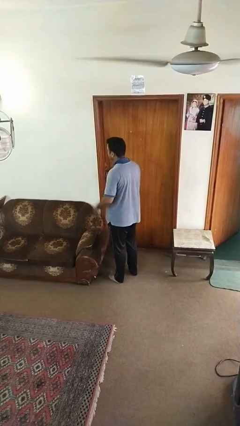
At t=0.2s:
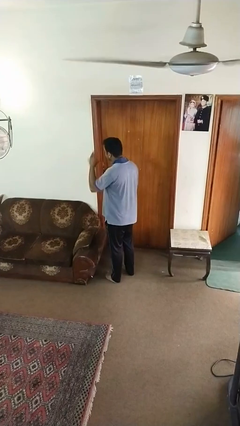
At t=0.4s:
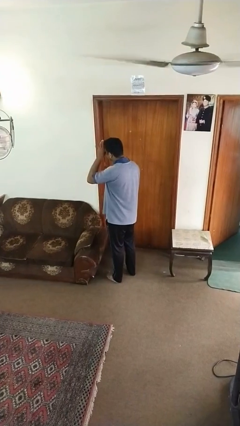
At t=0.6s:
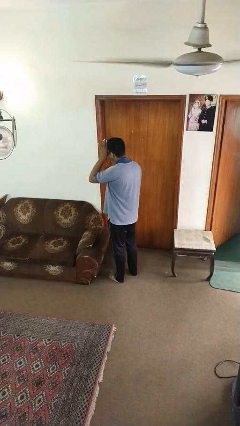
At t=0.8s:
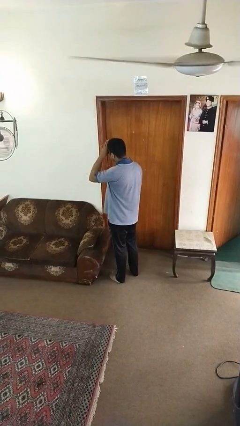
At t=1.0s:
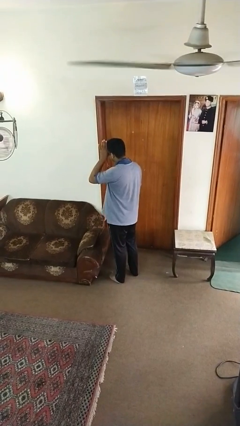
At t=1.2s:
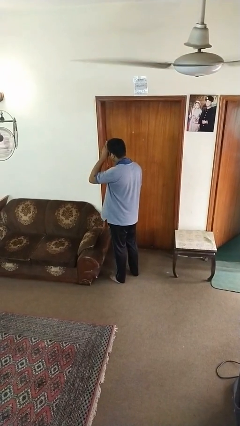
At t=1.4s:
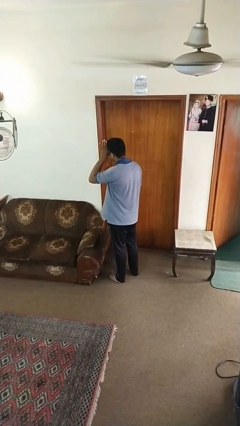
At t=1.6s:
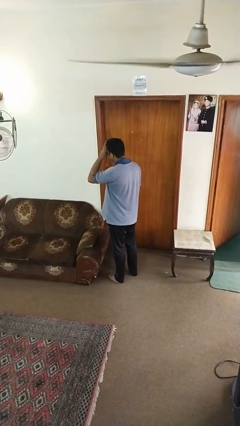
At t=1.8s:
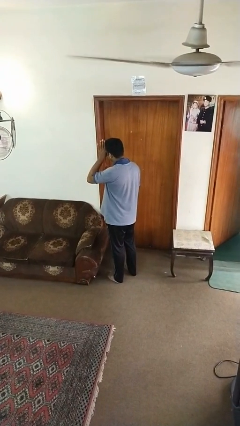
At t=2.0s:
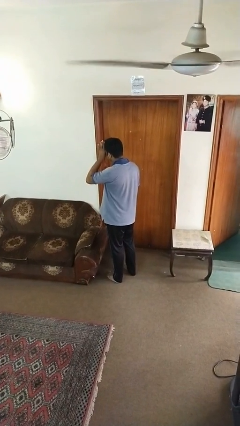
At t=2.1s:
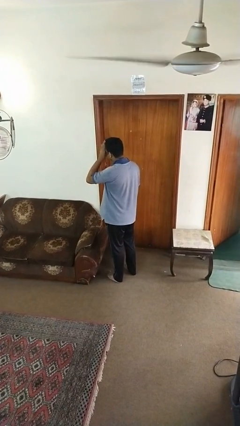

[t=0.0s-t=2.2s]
person rubs eyes

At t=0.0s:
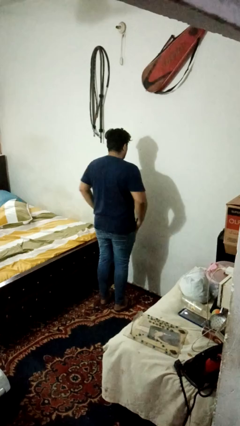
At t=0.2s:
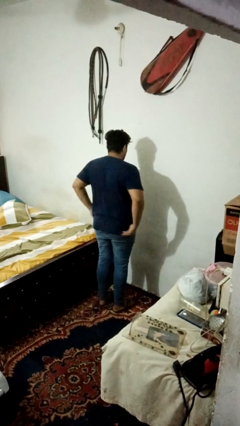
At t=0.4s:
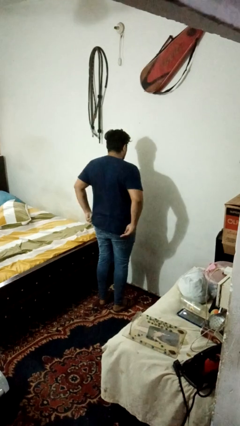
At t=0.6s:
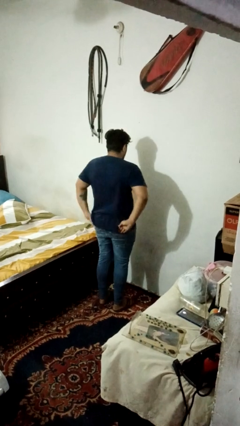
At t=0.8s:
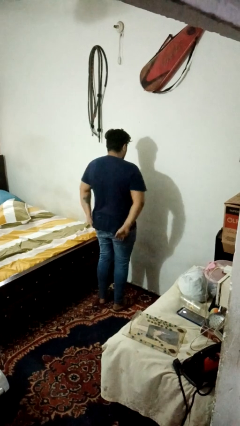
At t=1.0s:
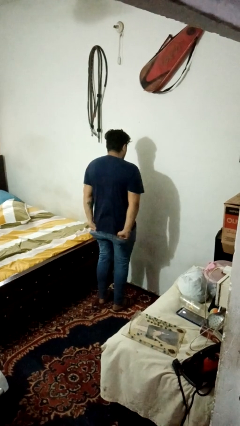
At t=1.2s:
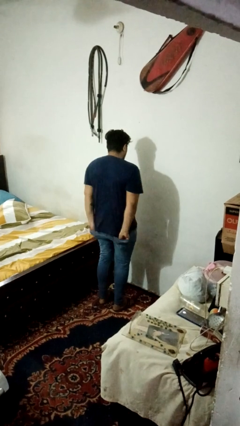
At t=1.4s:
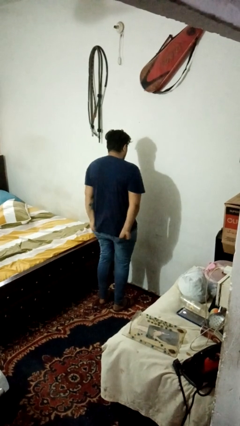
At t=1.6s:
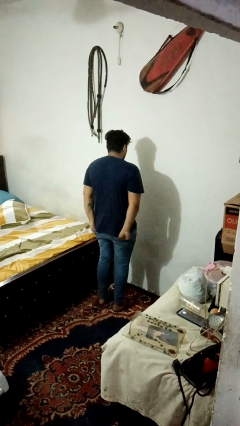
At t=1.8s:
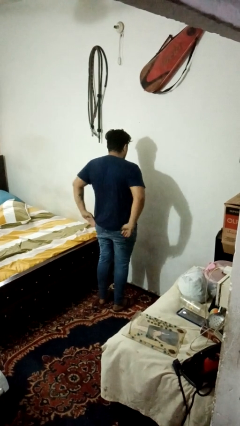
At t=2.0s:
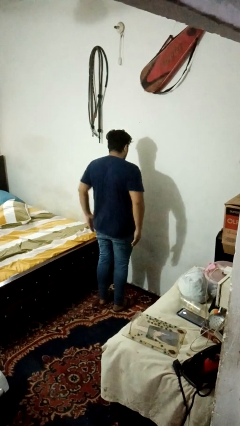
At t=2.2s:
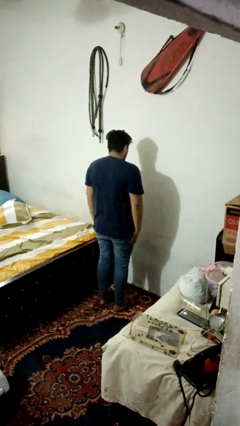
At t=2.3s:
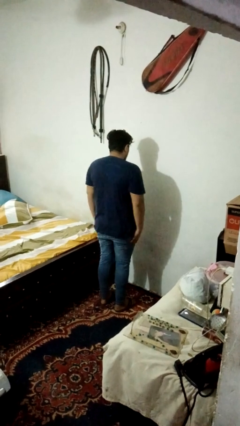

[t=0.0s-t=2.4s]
person puts hands in back pockets

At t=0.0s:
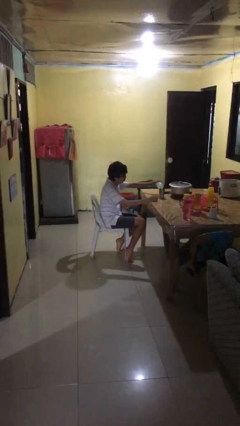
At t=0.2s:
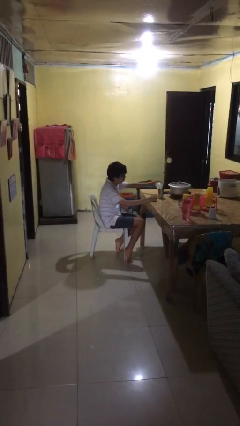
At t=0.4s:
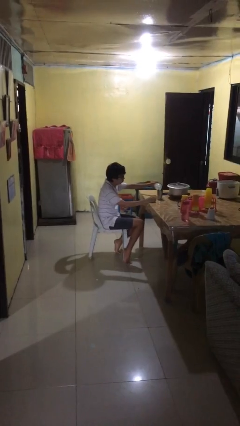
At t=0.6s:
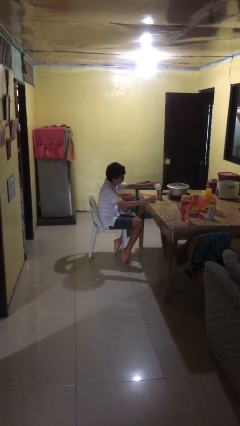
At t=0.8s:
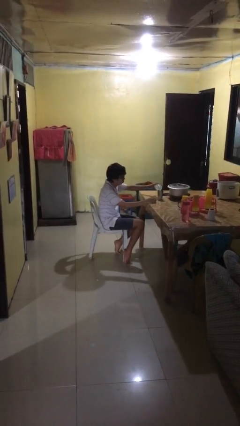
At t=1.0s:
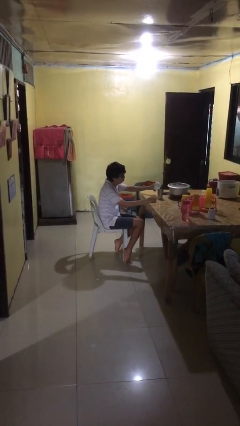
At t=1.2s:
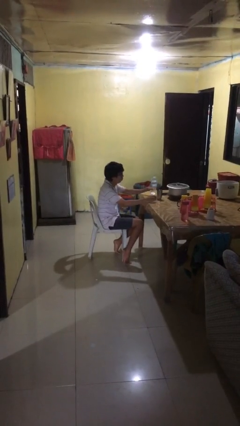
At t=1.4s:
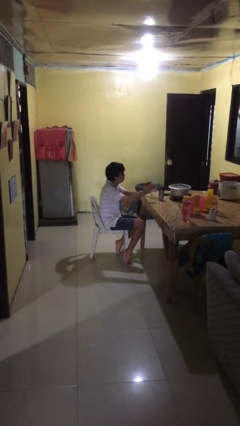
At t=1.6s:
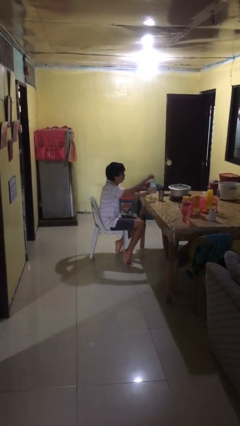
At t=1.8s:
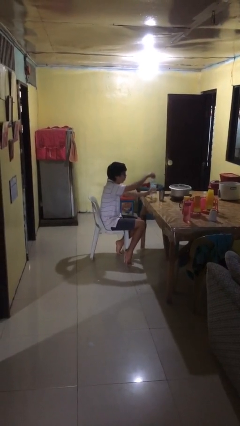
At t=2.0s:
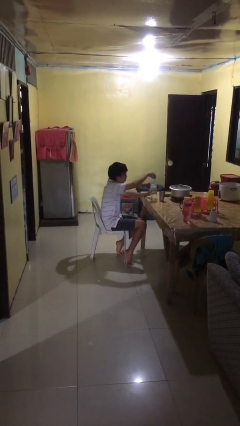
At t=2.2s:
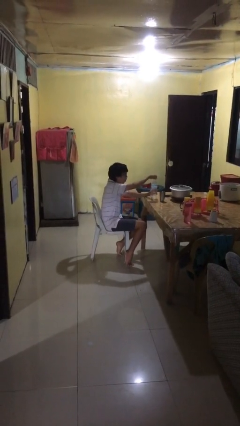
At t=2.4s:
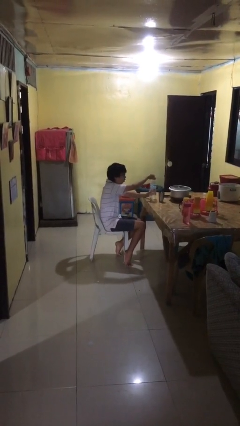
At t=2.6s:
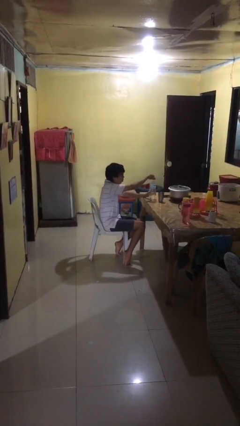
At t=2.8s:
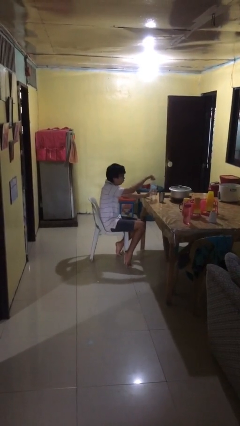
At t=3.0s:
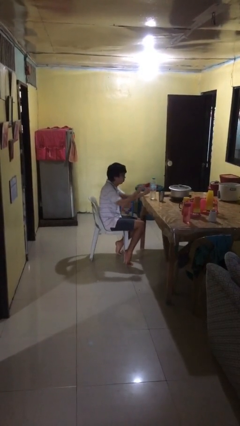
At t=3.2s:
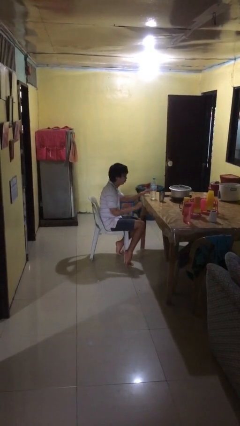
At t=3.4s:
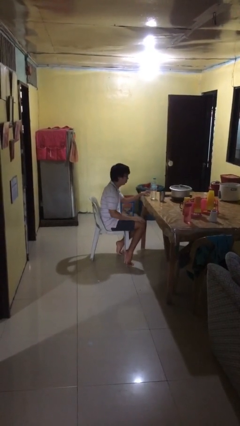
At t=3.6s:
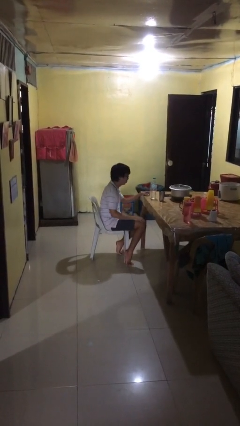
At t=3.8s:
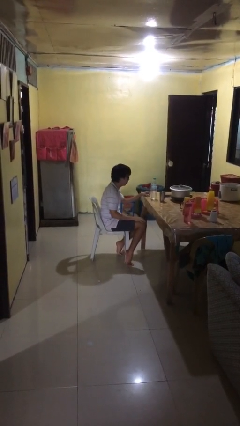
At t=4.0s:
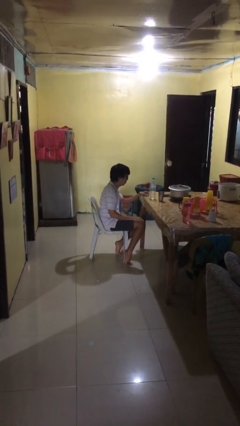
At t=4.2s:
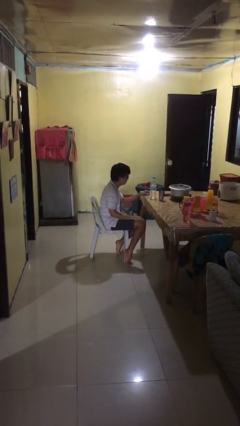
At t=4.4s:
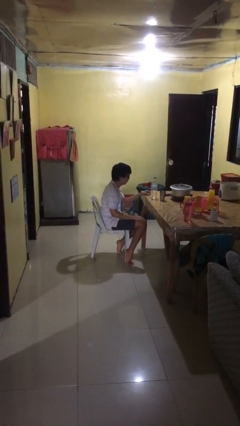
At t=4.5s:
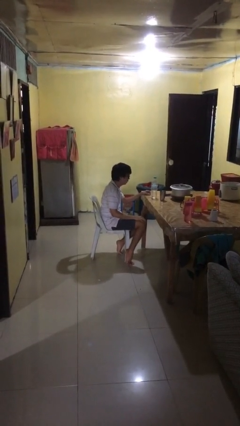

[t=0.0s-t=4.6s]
person screws lid to bottle

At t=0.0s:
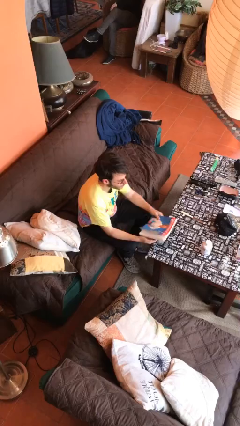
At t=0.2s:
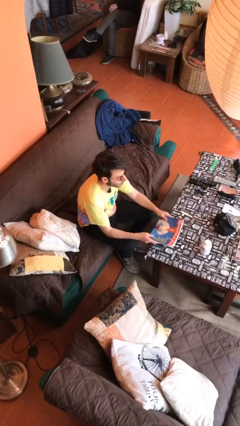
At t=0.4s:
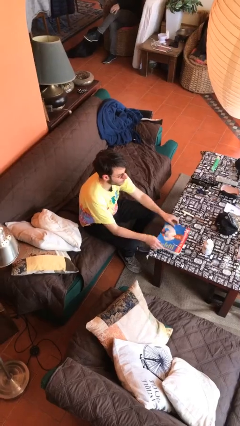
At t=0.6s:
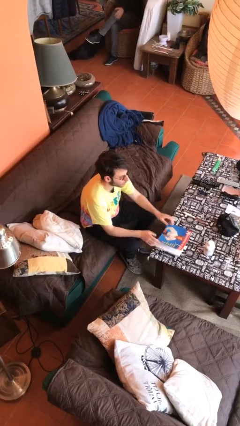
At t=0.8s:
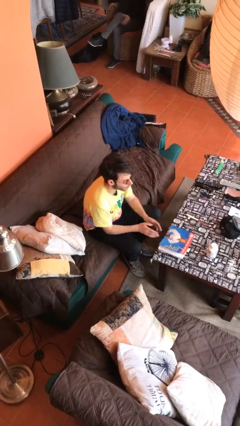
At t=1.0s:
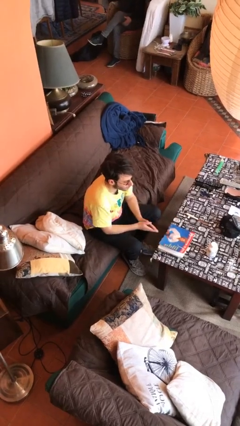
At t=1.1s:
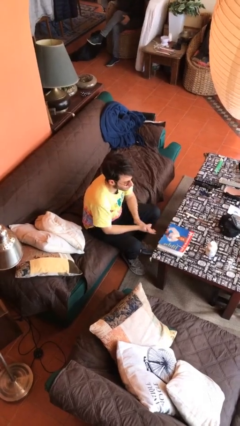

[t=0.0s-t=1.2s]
person puts down object on table

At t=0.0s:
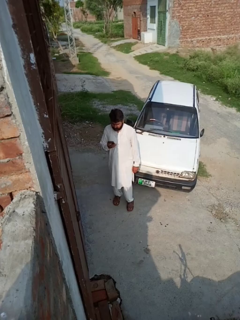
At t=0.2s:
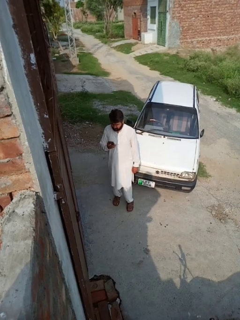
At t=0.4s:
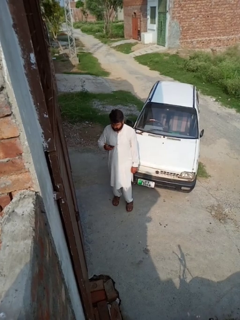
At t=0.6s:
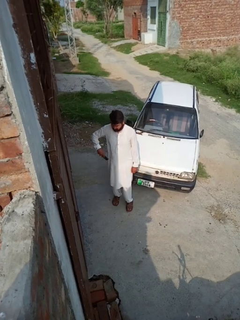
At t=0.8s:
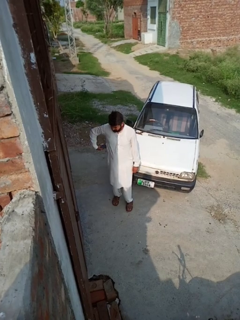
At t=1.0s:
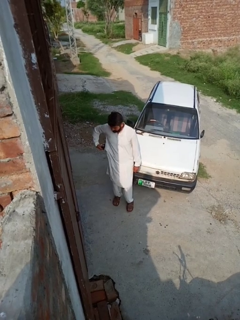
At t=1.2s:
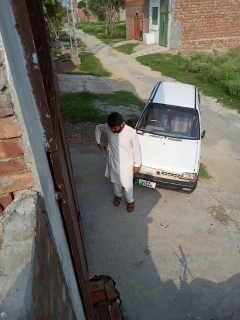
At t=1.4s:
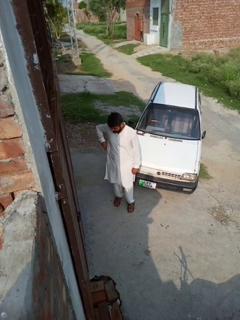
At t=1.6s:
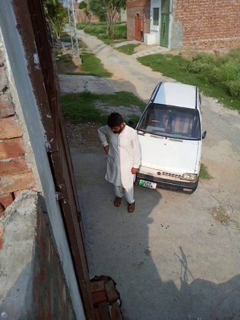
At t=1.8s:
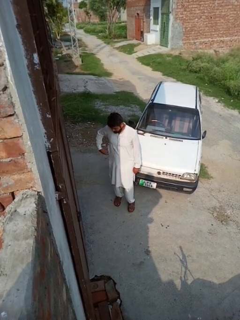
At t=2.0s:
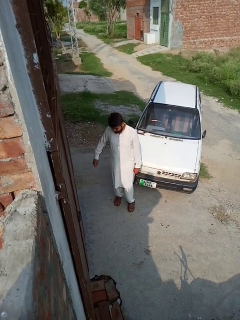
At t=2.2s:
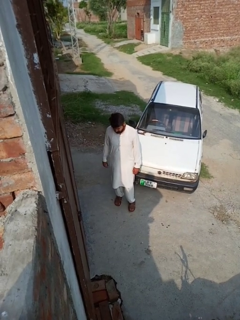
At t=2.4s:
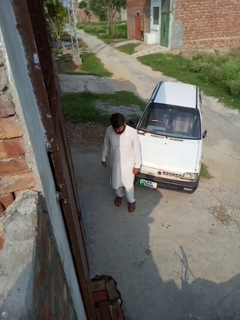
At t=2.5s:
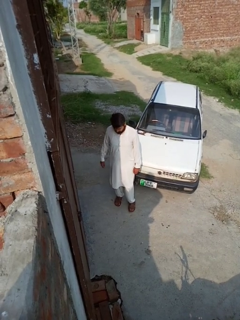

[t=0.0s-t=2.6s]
person puts phone into pocket

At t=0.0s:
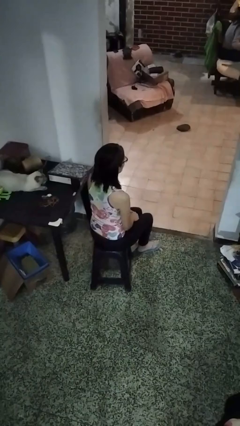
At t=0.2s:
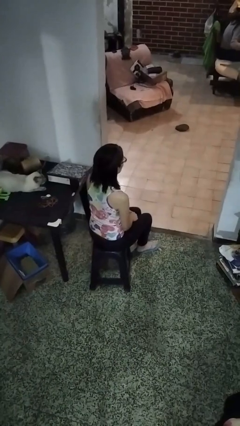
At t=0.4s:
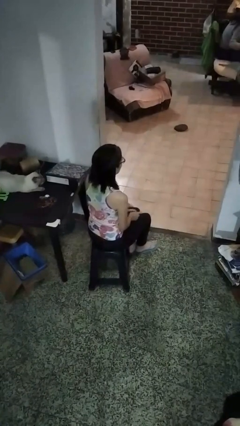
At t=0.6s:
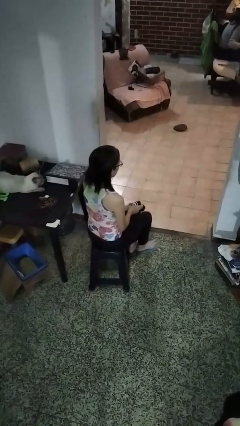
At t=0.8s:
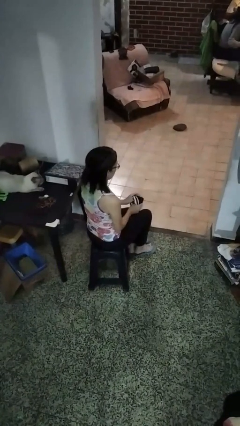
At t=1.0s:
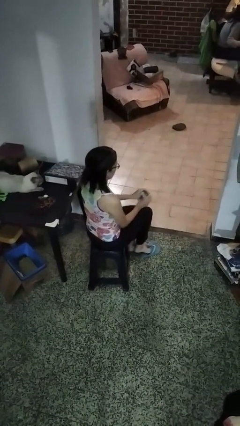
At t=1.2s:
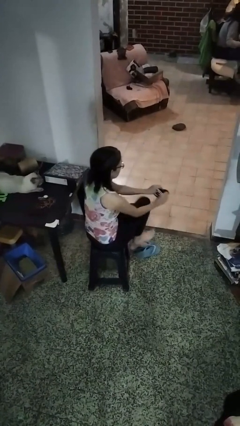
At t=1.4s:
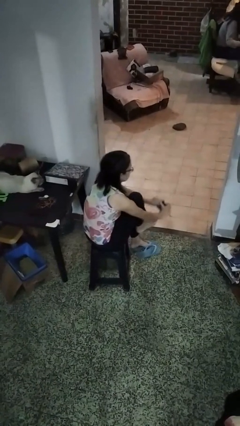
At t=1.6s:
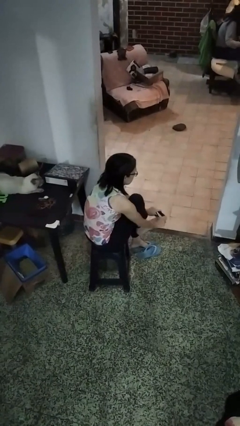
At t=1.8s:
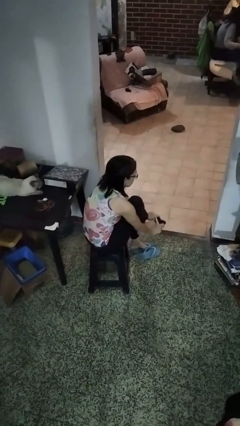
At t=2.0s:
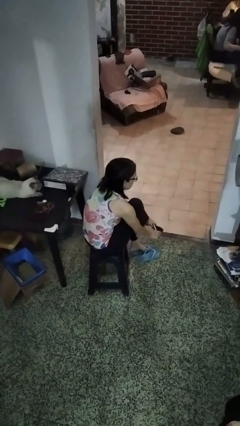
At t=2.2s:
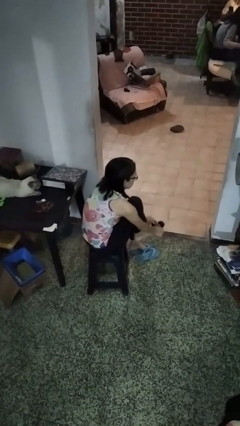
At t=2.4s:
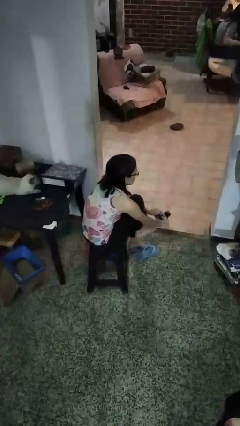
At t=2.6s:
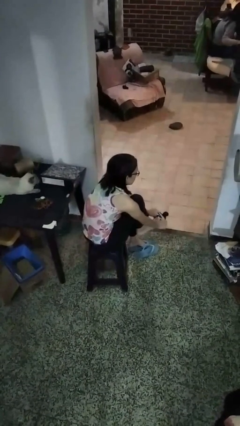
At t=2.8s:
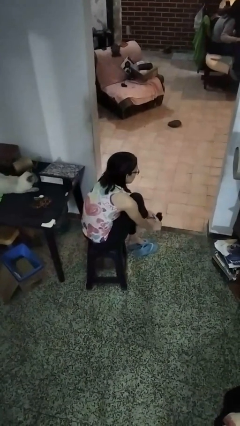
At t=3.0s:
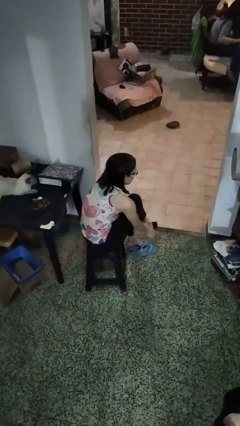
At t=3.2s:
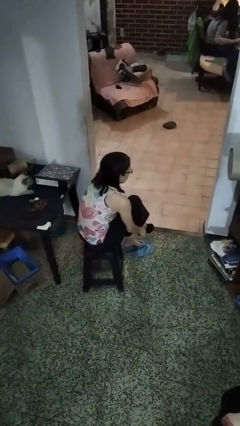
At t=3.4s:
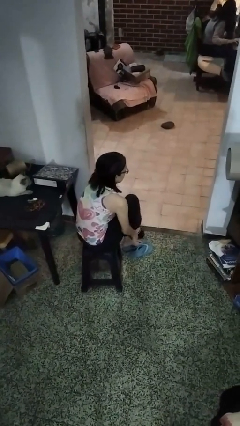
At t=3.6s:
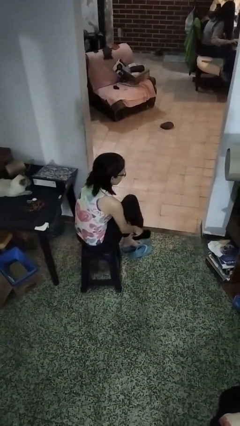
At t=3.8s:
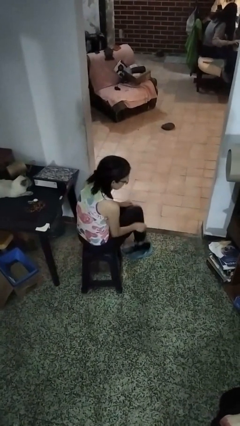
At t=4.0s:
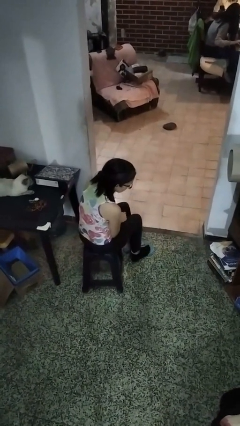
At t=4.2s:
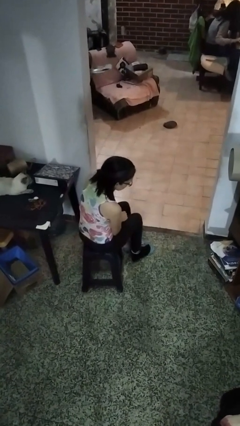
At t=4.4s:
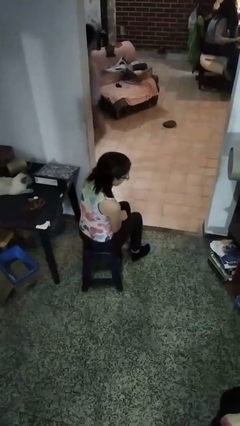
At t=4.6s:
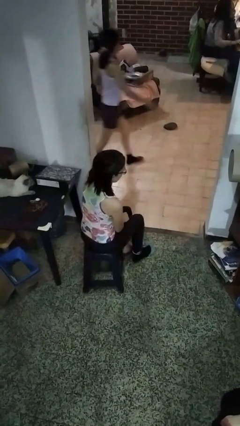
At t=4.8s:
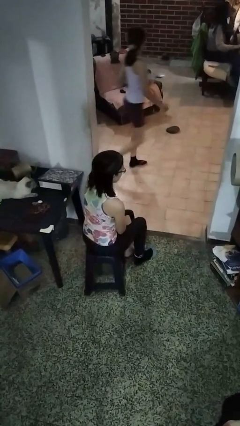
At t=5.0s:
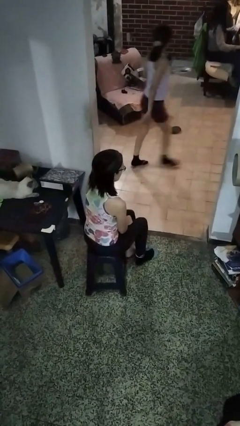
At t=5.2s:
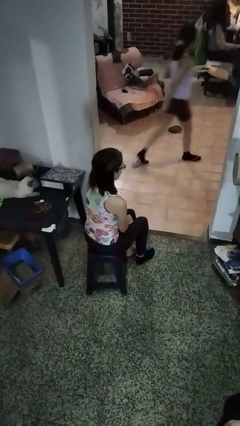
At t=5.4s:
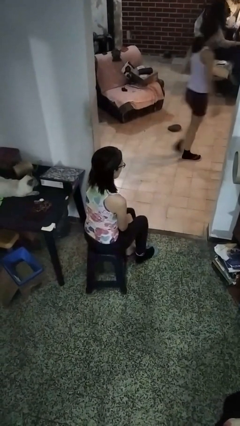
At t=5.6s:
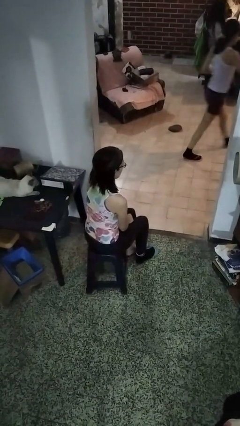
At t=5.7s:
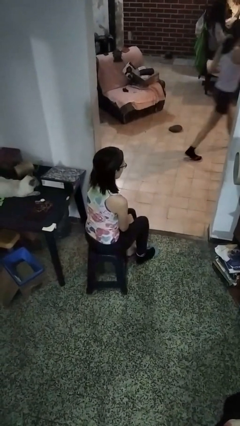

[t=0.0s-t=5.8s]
person puts on socks
